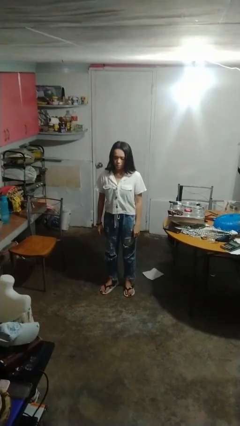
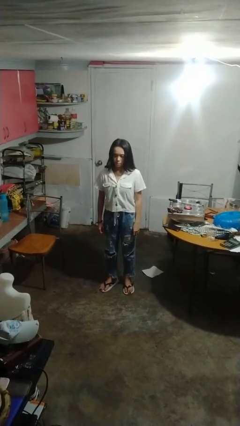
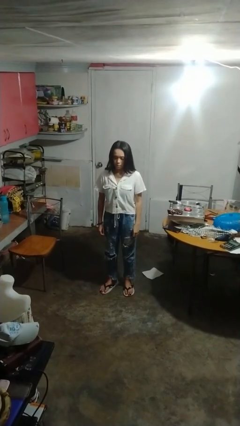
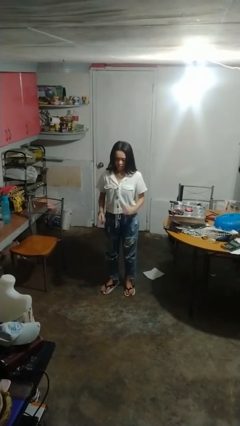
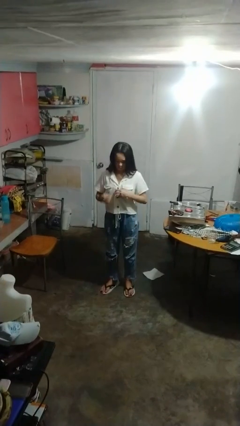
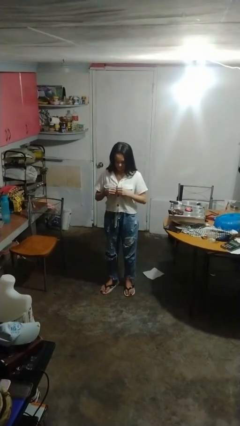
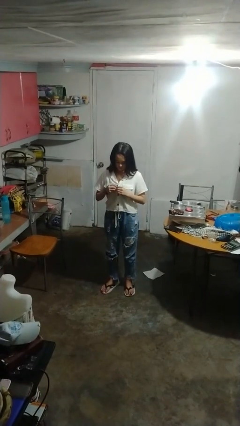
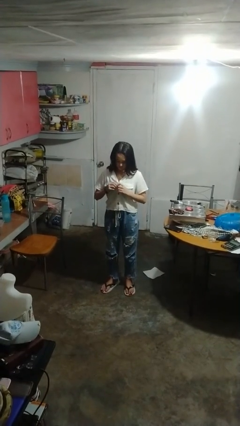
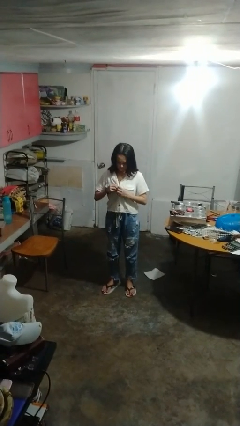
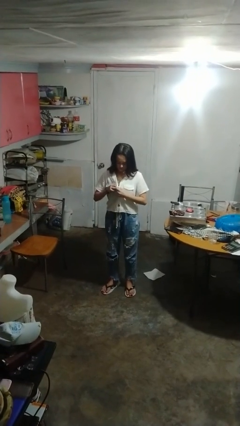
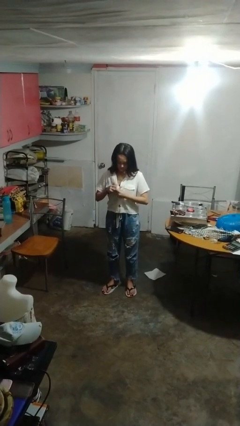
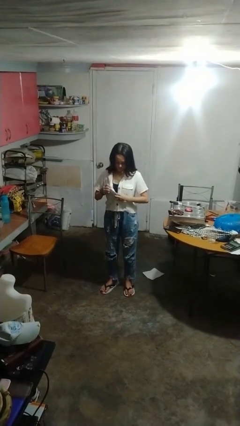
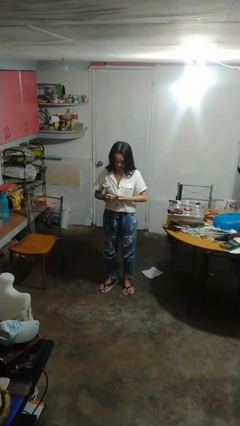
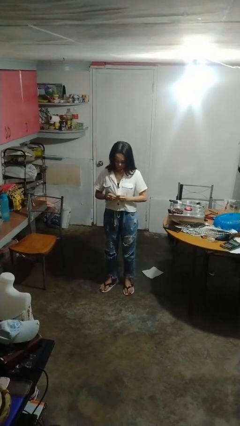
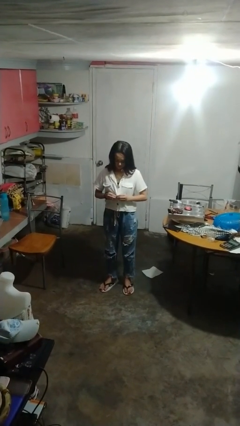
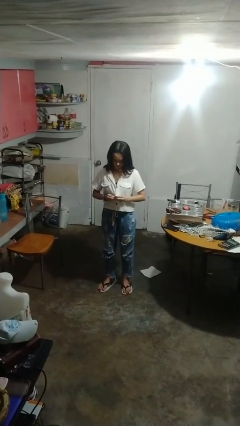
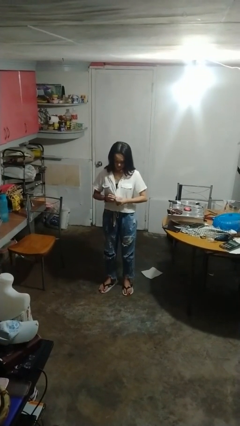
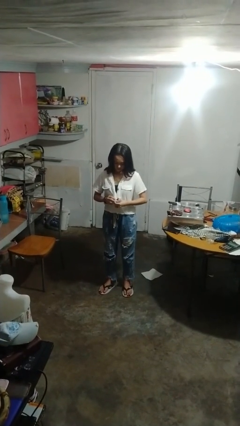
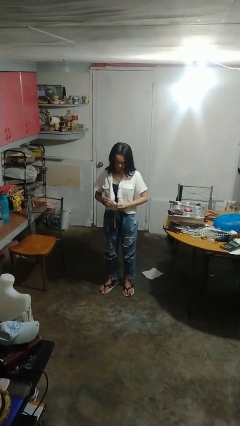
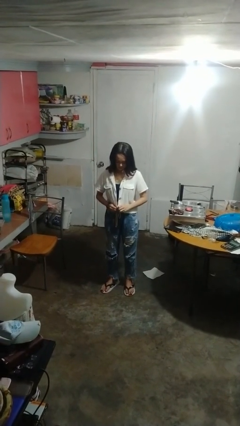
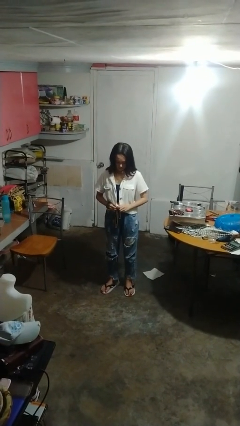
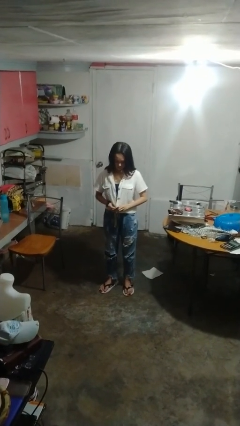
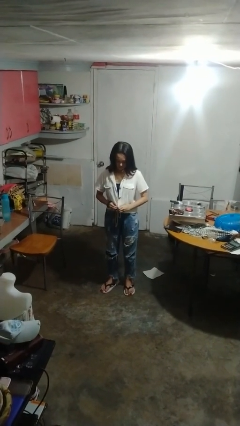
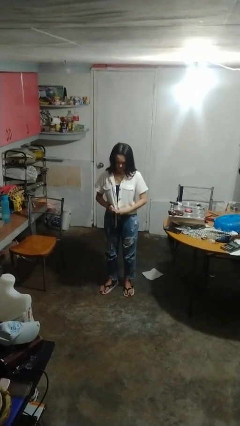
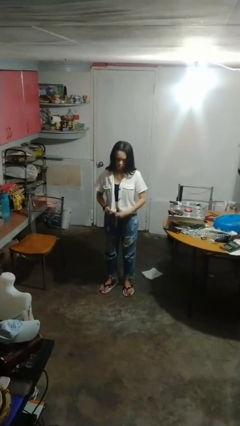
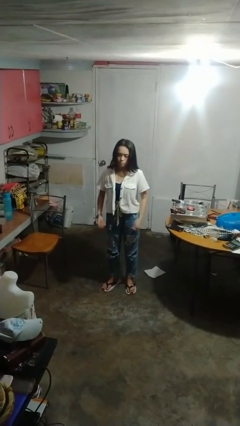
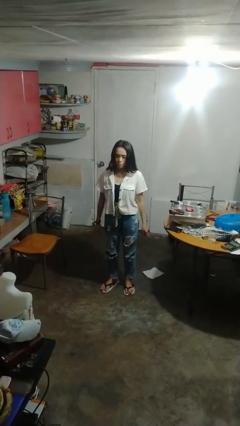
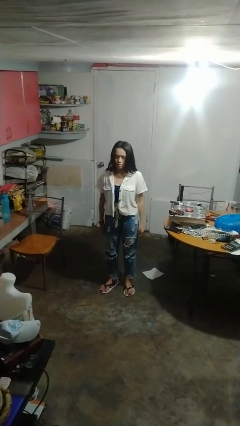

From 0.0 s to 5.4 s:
person unbuttons shirt

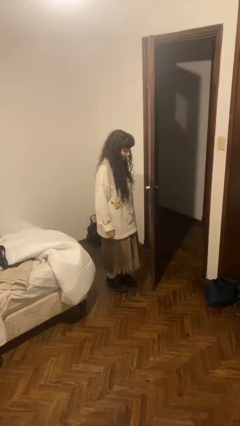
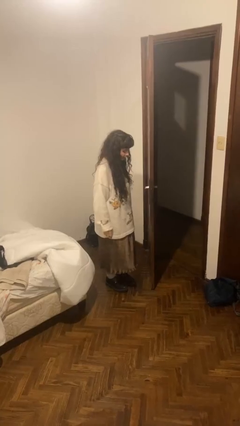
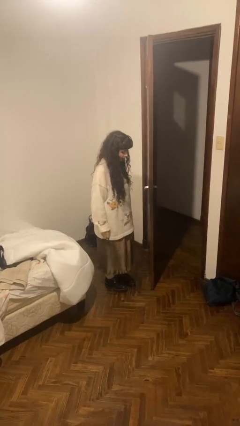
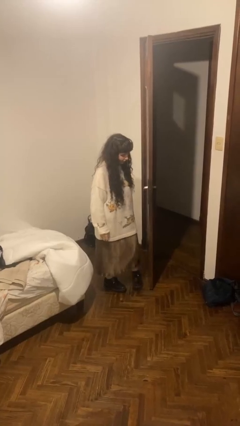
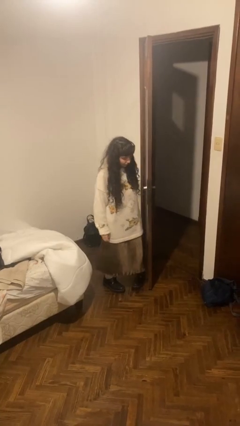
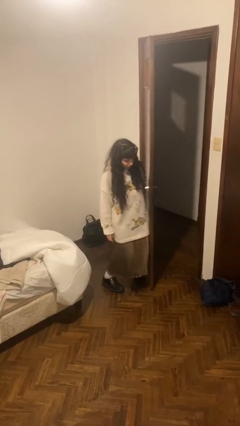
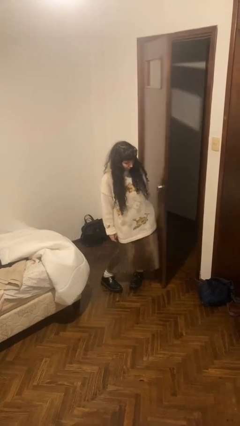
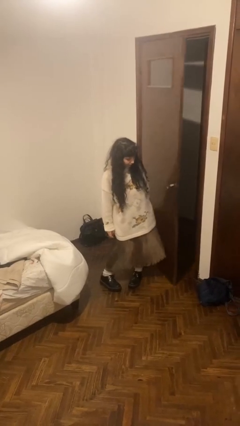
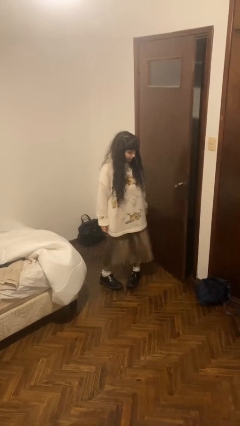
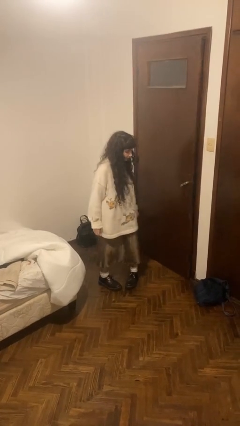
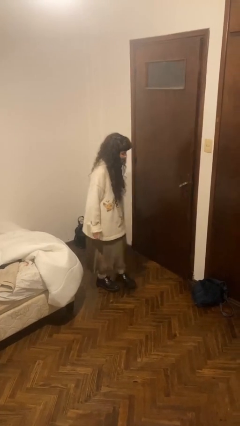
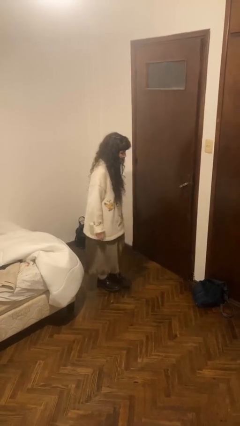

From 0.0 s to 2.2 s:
person closes door with hip

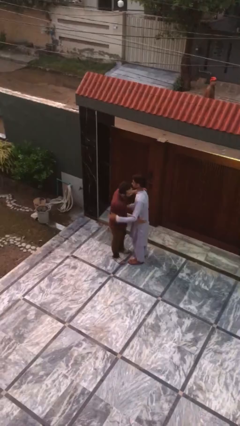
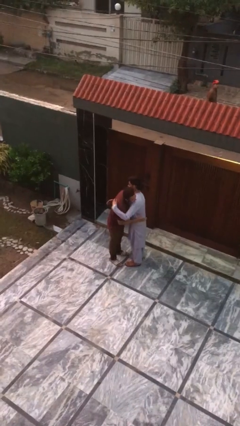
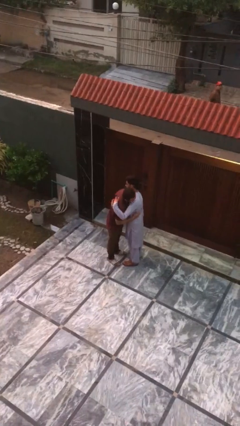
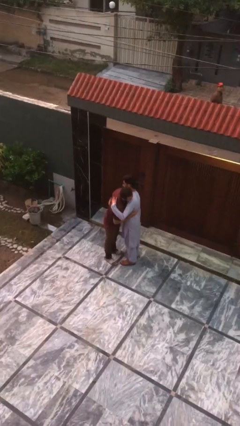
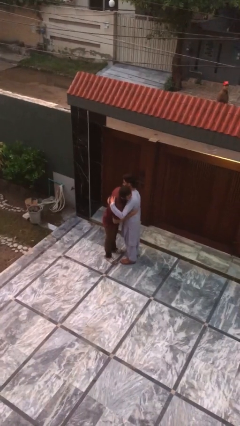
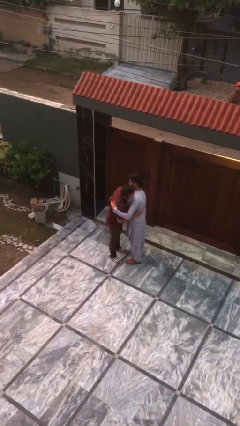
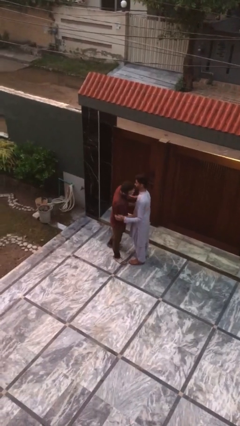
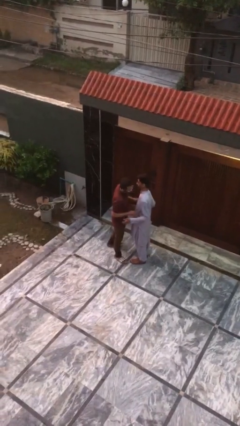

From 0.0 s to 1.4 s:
person embraces person

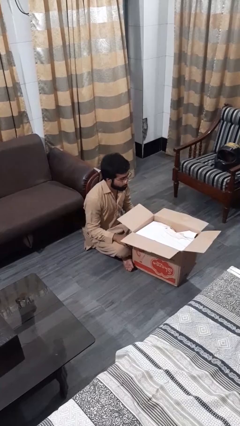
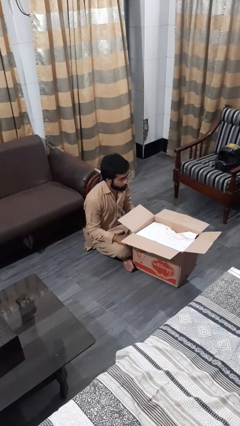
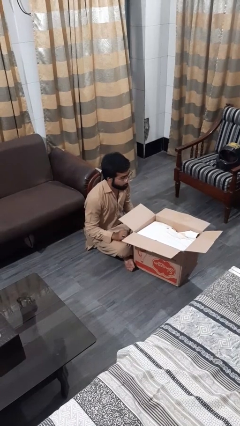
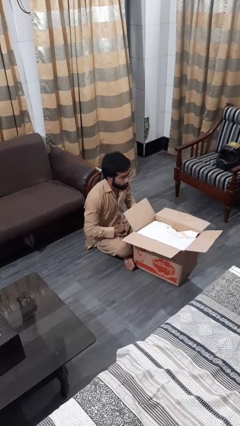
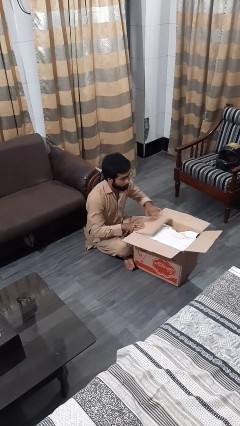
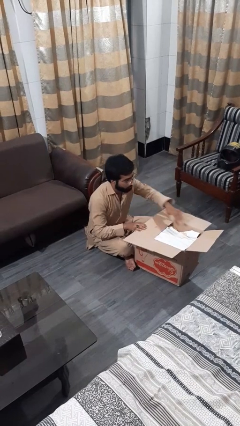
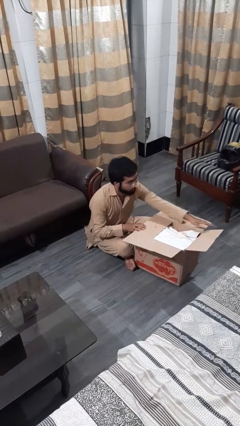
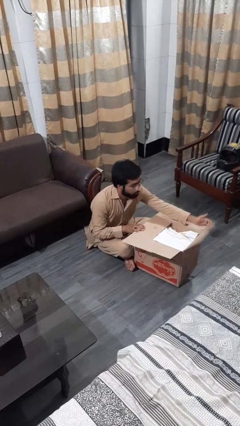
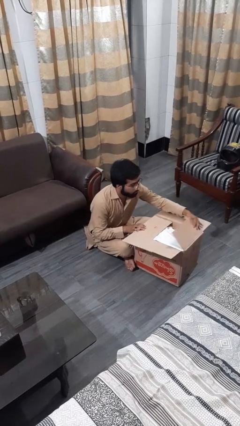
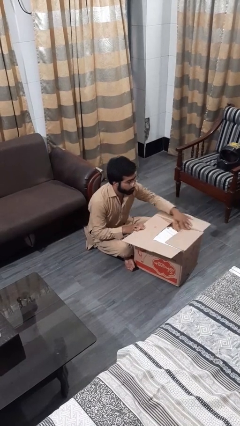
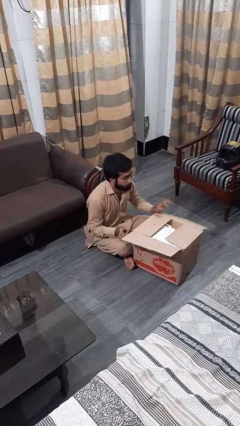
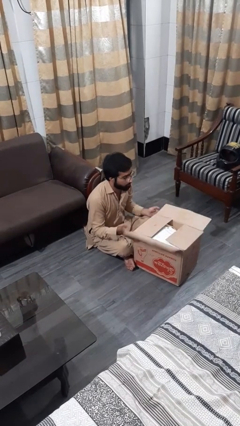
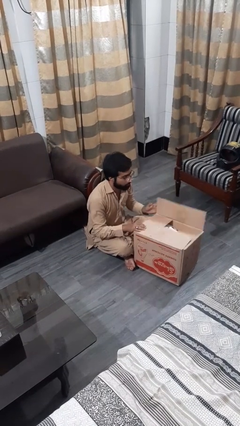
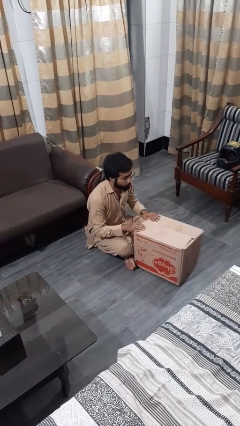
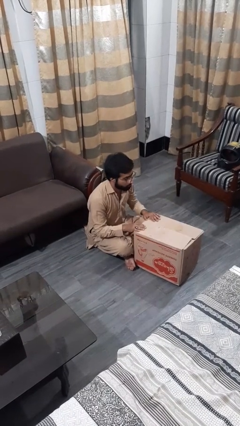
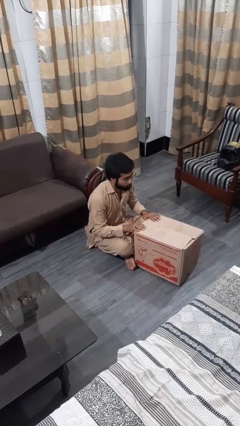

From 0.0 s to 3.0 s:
person closes box

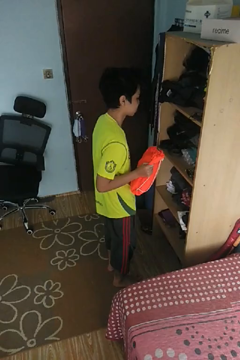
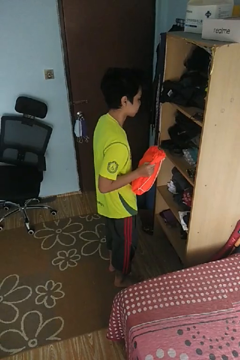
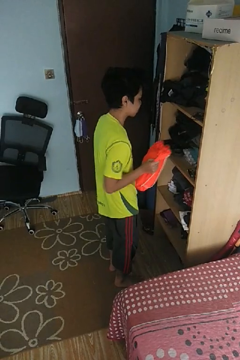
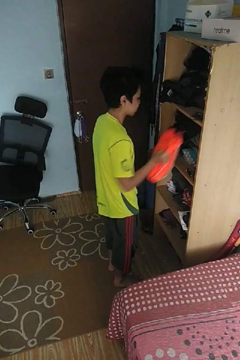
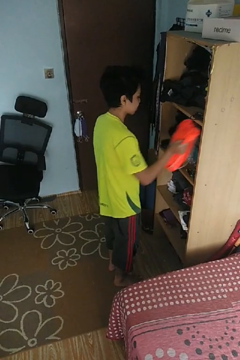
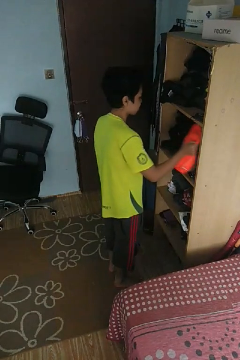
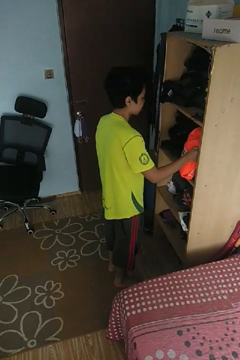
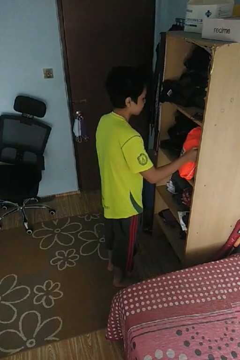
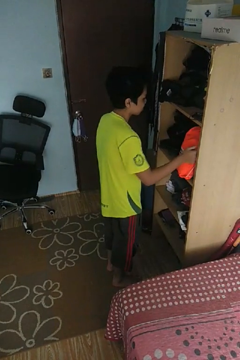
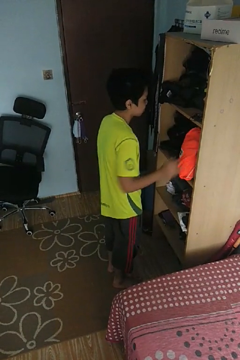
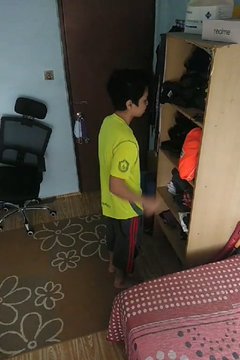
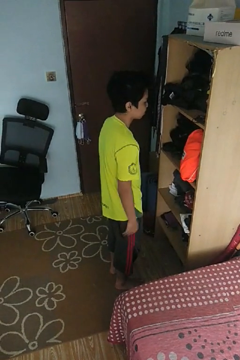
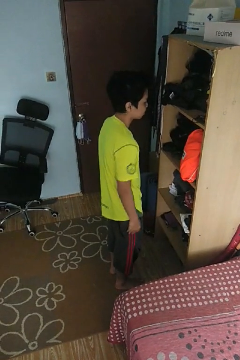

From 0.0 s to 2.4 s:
person puts down object into cabinet

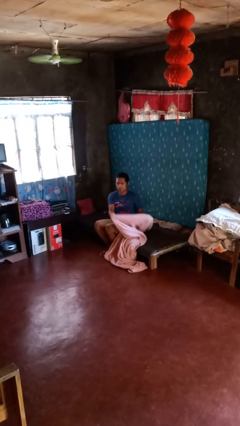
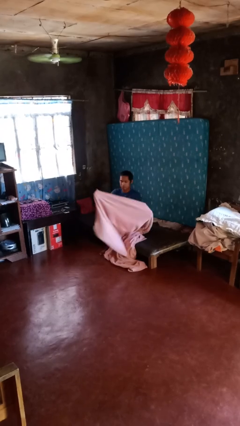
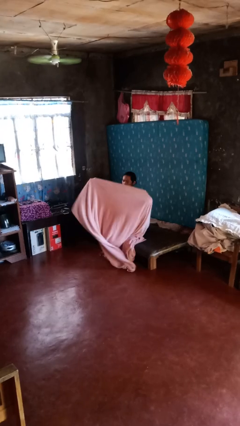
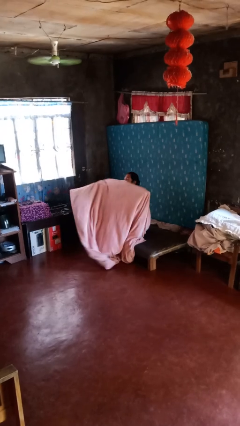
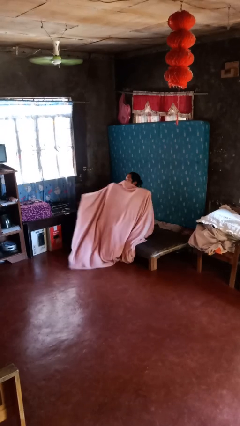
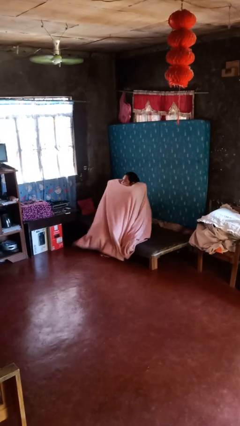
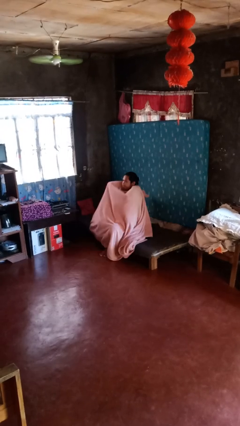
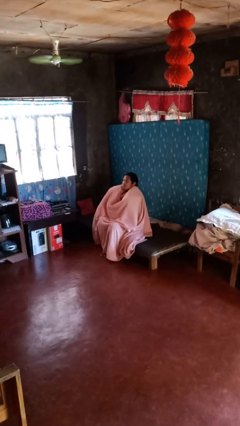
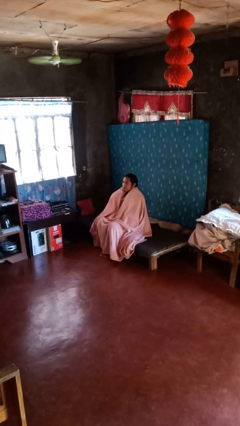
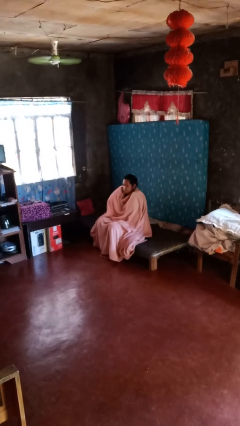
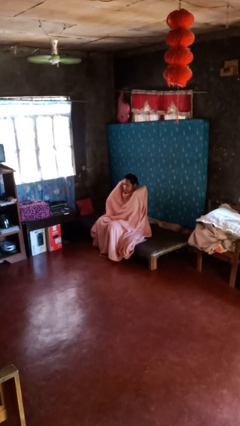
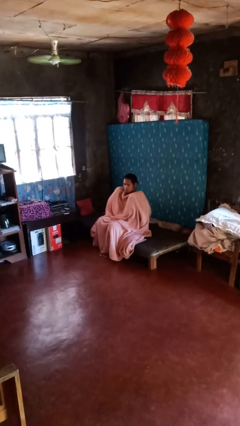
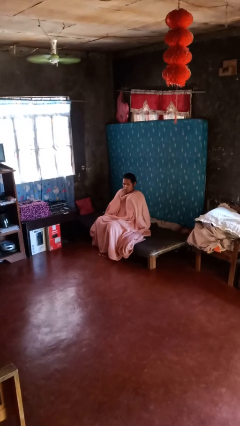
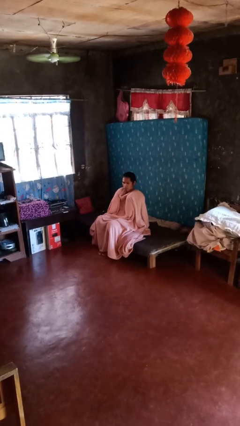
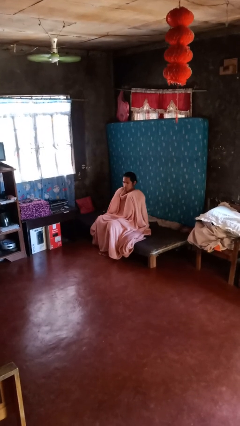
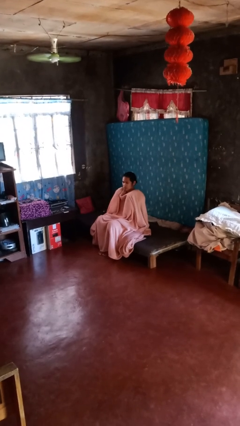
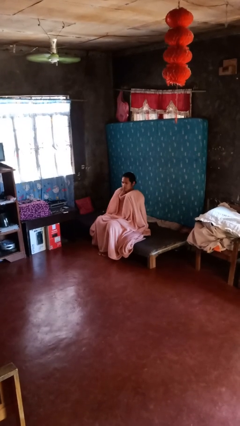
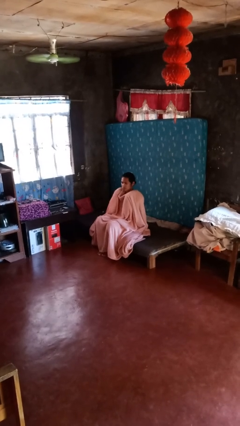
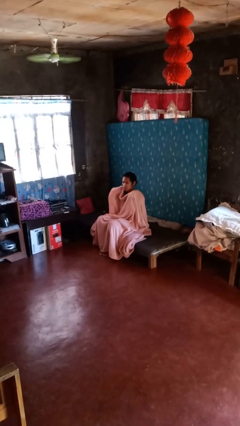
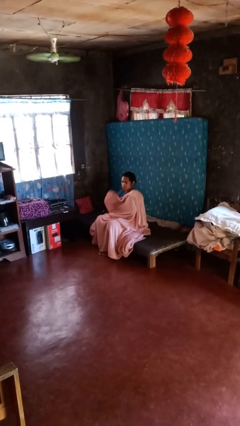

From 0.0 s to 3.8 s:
person covers with blanket
